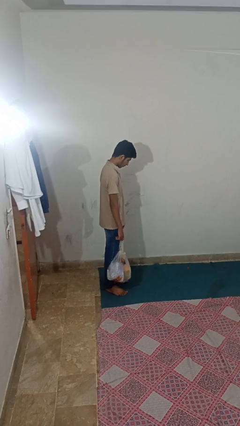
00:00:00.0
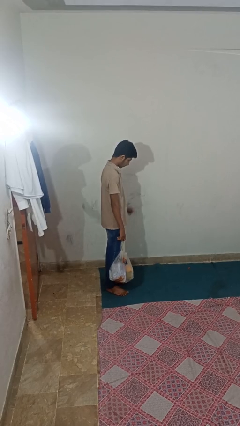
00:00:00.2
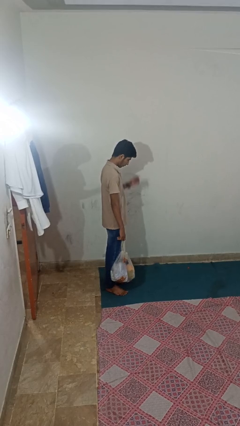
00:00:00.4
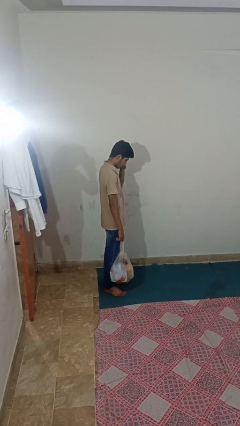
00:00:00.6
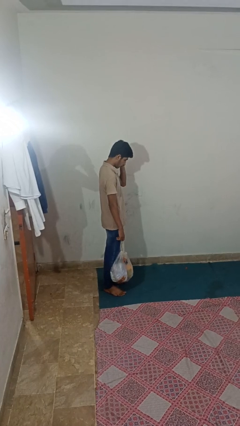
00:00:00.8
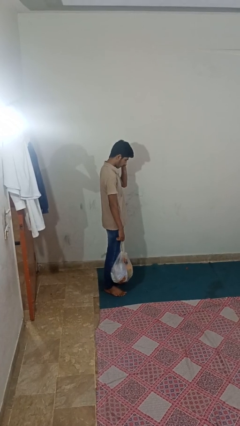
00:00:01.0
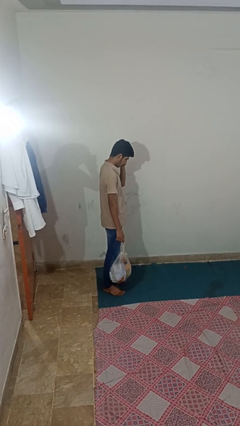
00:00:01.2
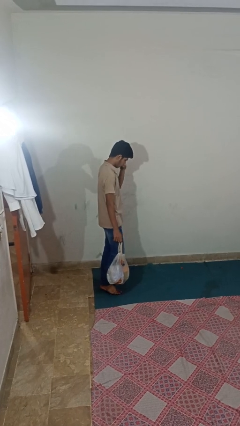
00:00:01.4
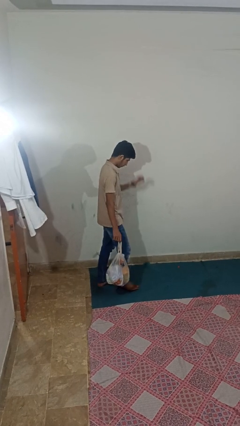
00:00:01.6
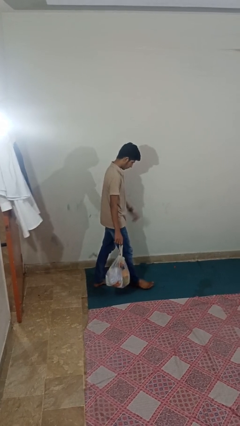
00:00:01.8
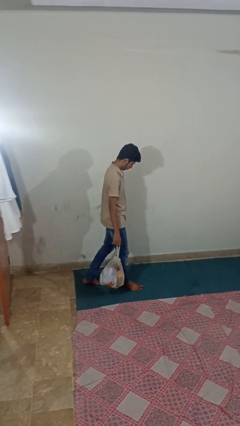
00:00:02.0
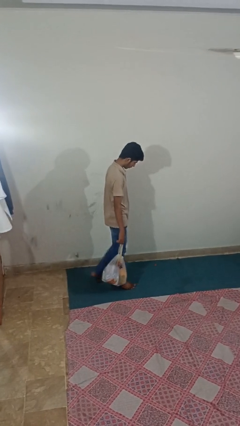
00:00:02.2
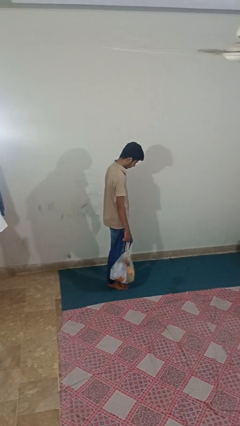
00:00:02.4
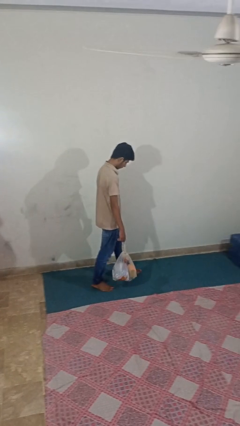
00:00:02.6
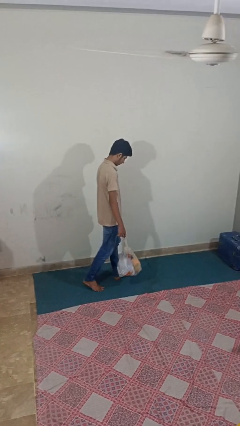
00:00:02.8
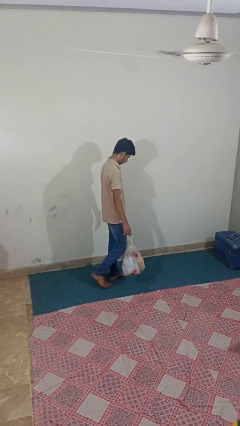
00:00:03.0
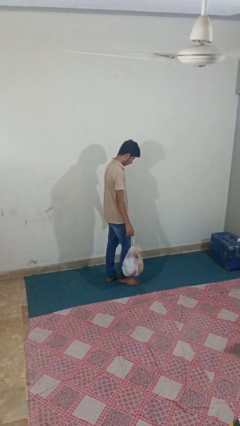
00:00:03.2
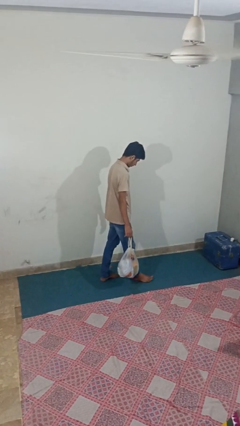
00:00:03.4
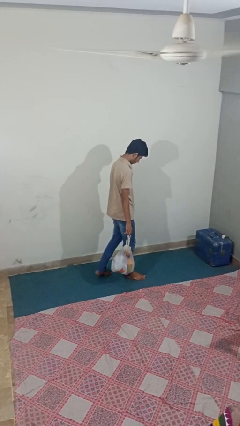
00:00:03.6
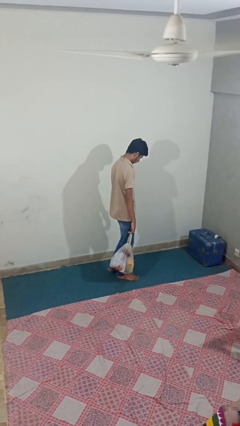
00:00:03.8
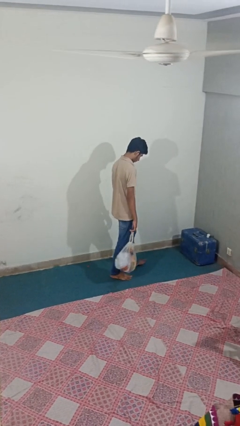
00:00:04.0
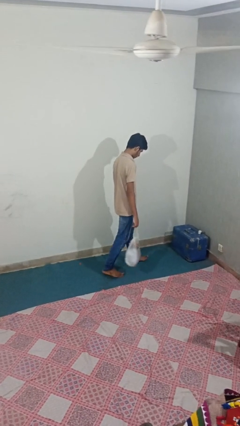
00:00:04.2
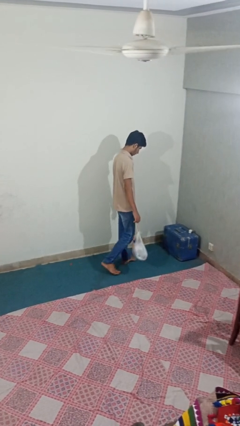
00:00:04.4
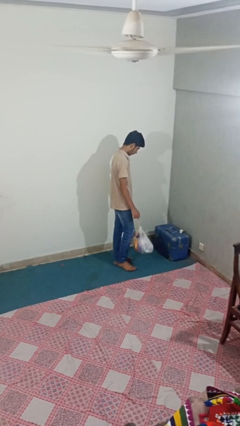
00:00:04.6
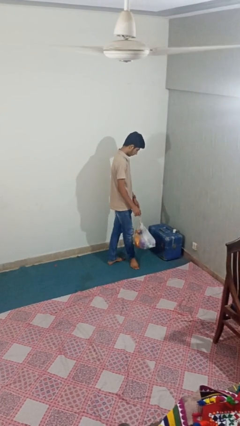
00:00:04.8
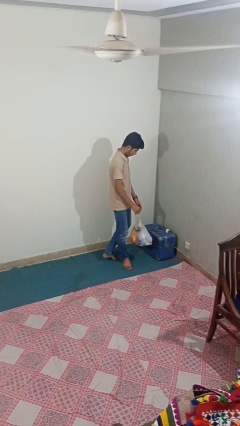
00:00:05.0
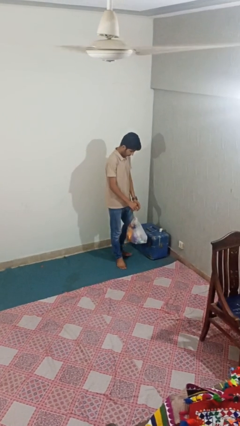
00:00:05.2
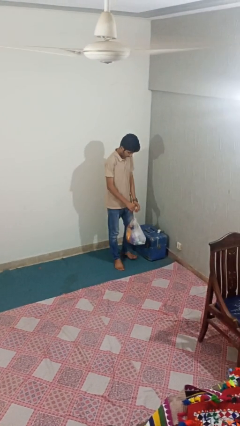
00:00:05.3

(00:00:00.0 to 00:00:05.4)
person carries groceries

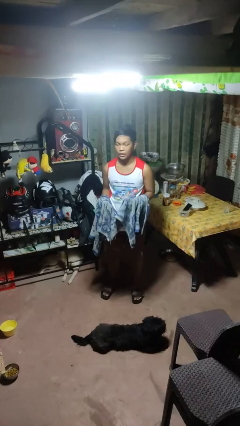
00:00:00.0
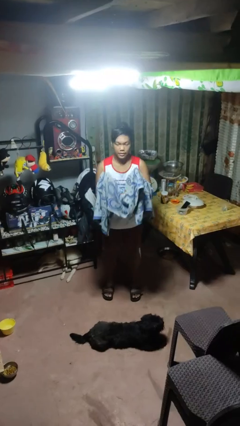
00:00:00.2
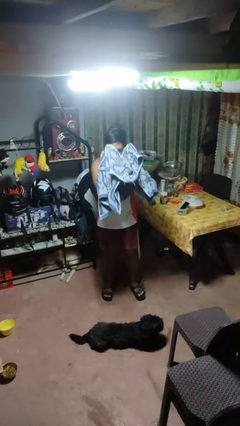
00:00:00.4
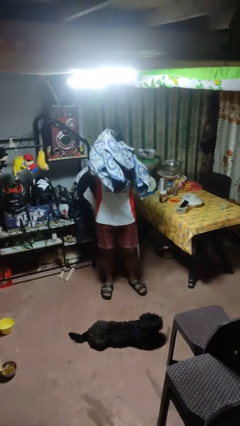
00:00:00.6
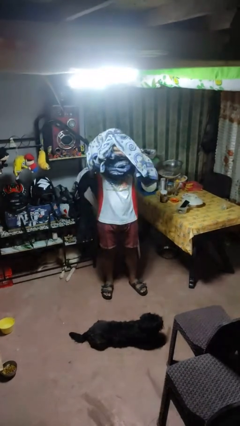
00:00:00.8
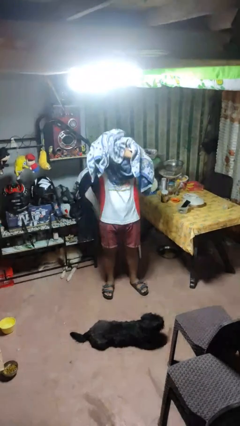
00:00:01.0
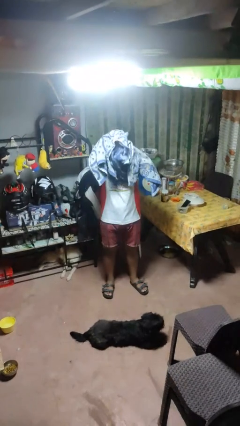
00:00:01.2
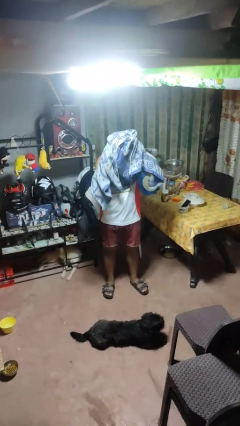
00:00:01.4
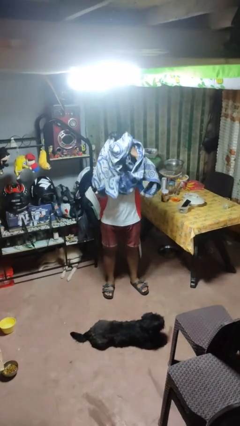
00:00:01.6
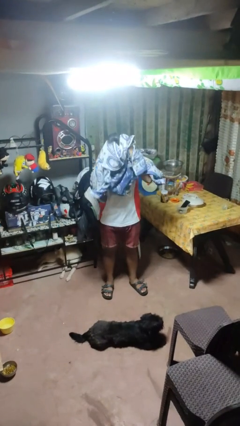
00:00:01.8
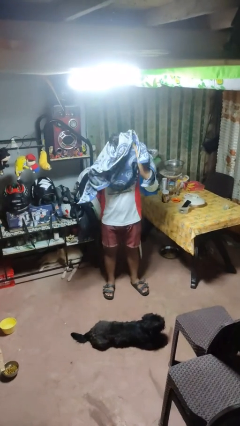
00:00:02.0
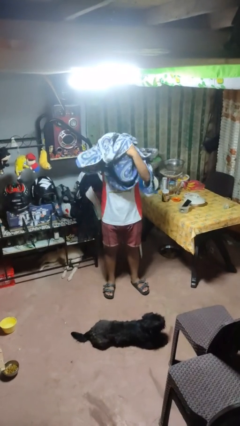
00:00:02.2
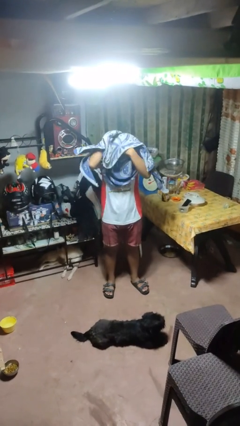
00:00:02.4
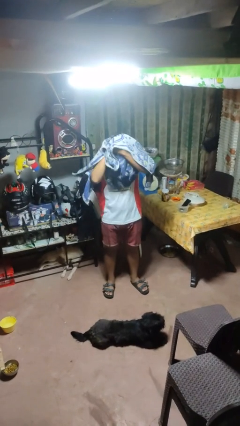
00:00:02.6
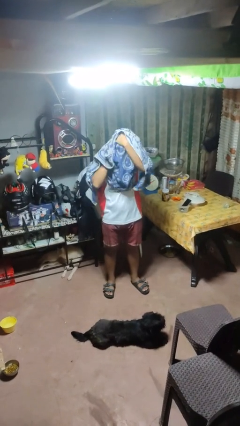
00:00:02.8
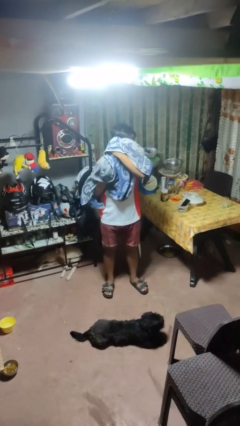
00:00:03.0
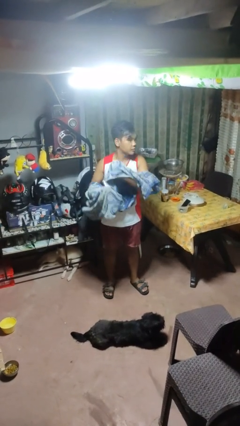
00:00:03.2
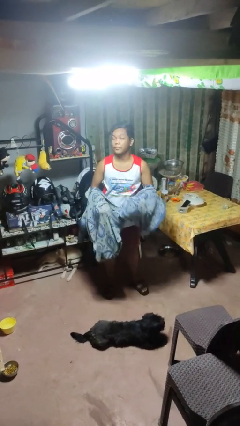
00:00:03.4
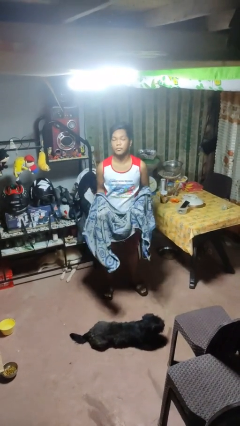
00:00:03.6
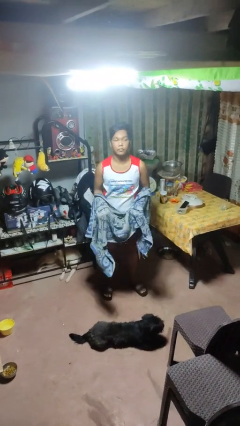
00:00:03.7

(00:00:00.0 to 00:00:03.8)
person dries hair with towel

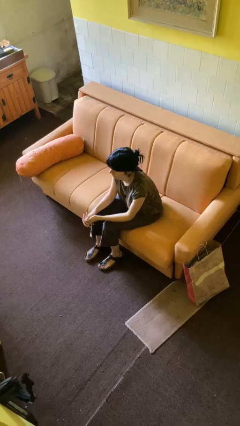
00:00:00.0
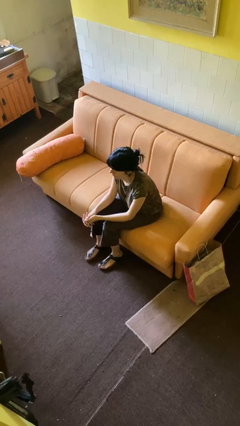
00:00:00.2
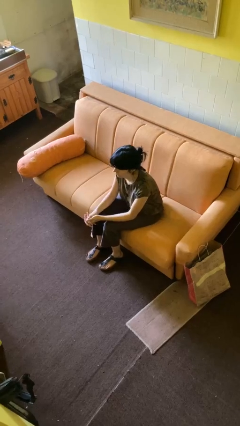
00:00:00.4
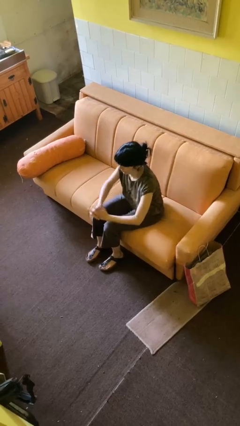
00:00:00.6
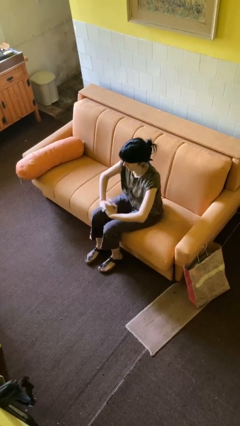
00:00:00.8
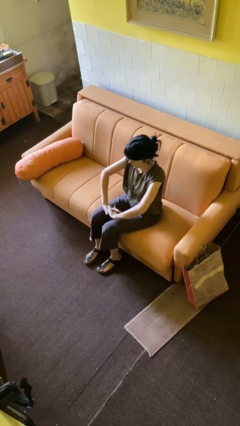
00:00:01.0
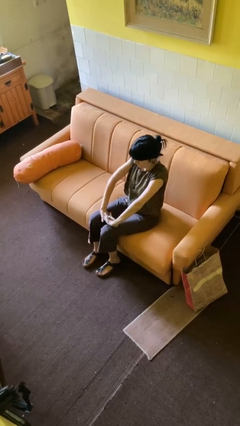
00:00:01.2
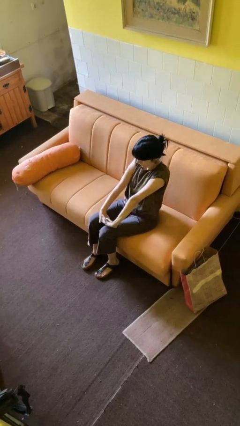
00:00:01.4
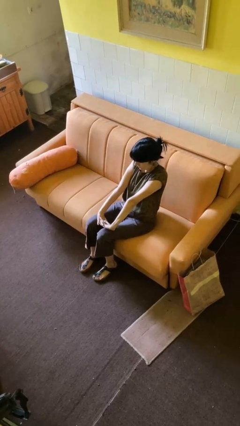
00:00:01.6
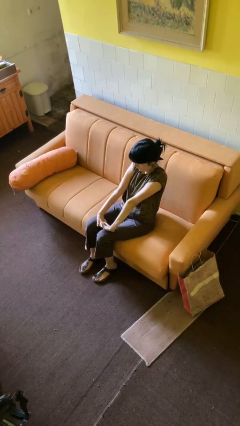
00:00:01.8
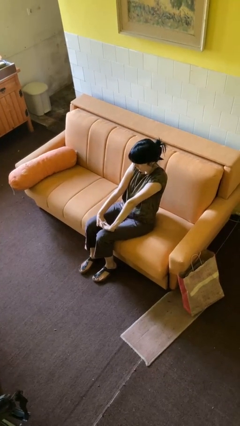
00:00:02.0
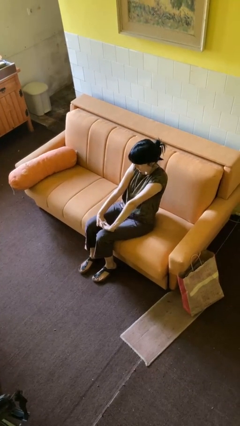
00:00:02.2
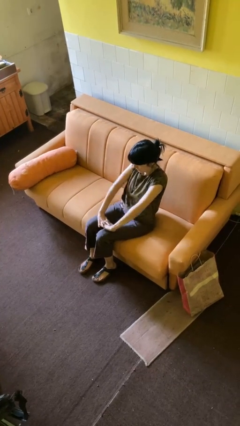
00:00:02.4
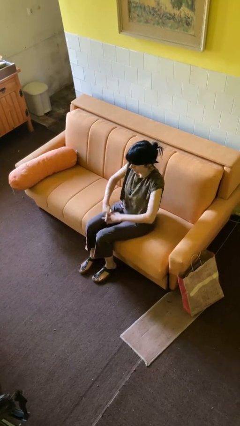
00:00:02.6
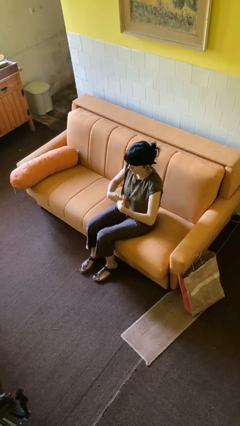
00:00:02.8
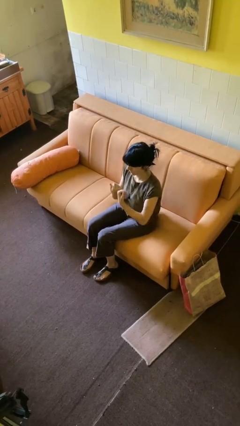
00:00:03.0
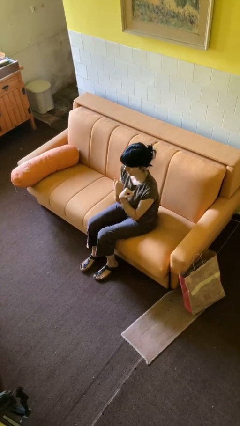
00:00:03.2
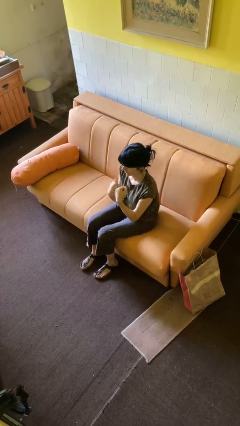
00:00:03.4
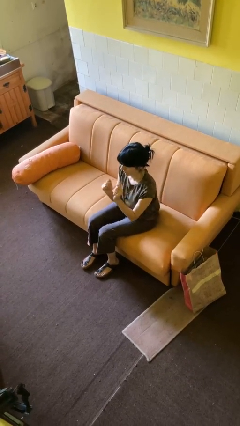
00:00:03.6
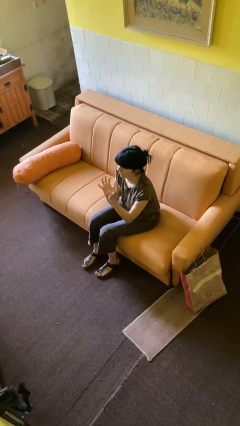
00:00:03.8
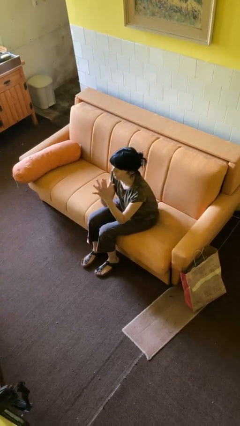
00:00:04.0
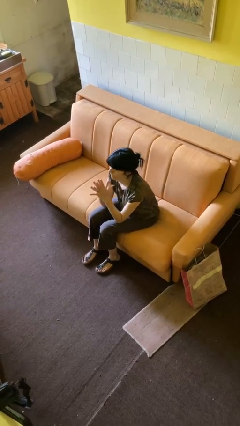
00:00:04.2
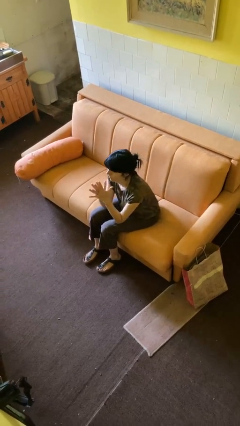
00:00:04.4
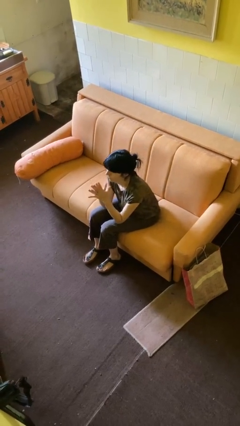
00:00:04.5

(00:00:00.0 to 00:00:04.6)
person cracks knuckles

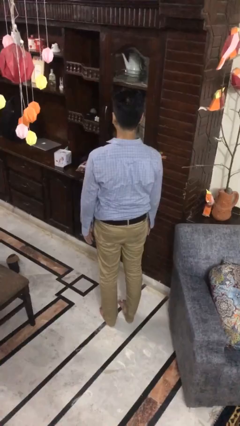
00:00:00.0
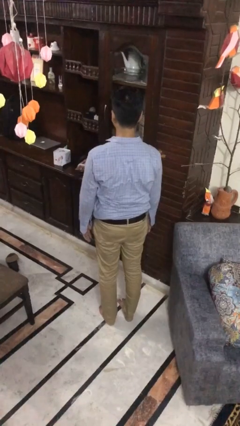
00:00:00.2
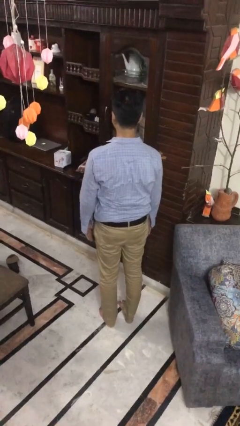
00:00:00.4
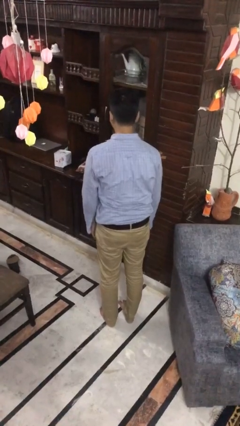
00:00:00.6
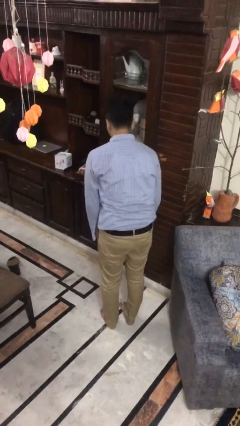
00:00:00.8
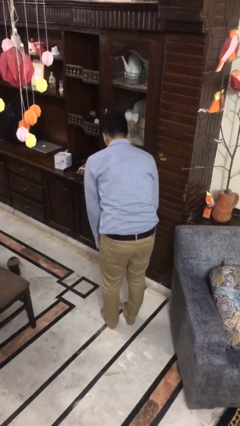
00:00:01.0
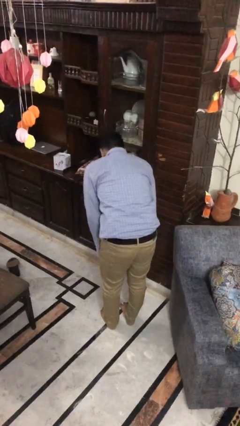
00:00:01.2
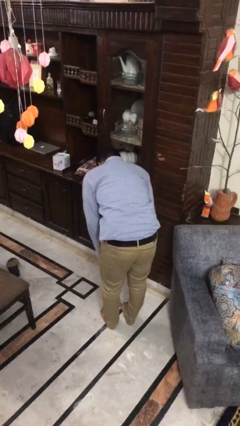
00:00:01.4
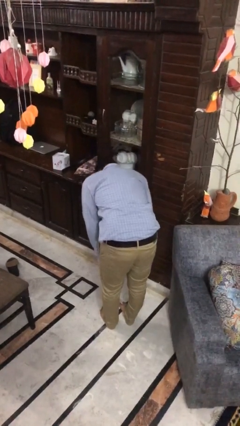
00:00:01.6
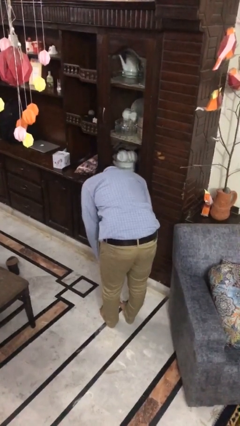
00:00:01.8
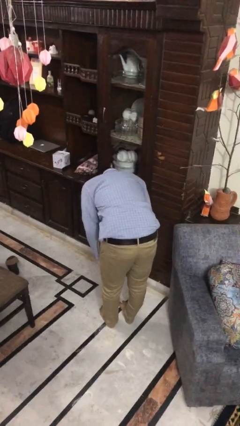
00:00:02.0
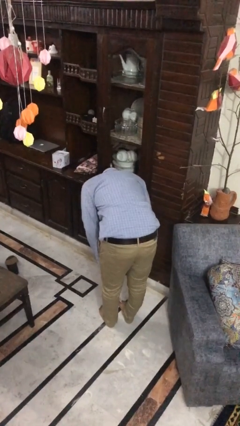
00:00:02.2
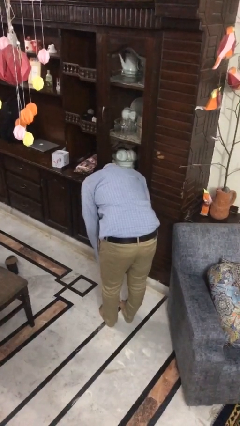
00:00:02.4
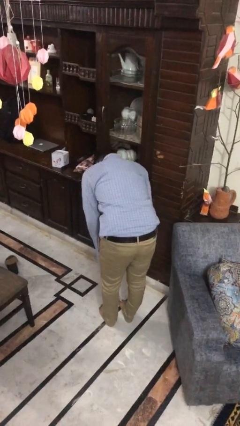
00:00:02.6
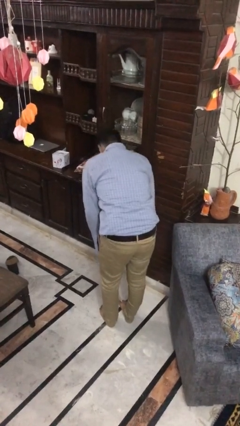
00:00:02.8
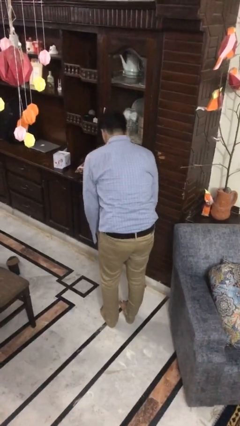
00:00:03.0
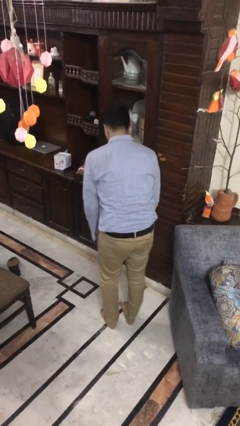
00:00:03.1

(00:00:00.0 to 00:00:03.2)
person bows

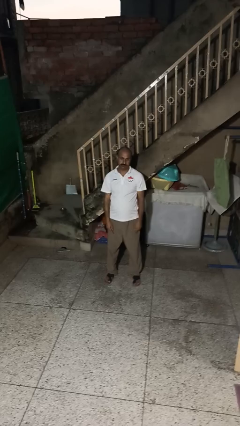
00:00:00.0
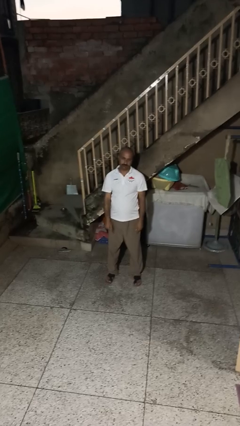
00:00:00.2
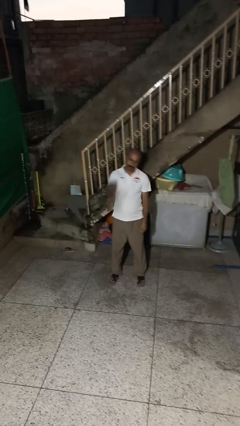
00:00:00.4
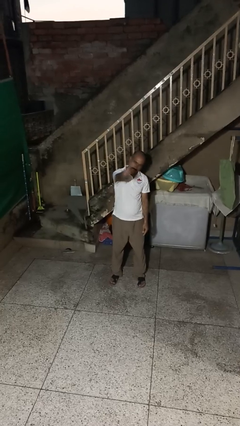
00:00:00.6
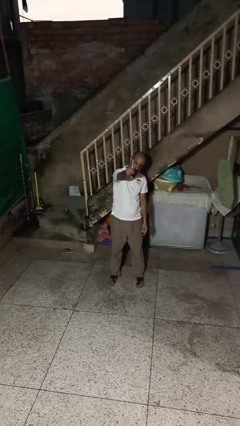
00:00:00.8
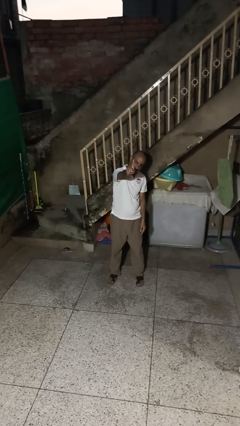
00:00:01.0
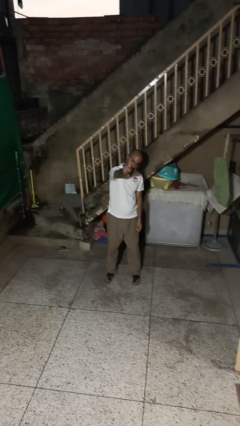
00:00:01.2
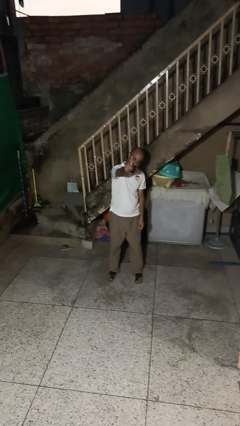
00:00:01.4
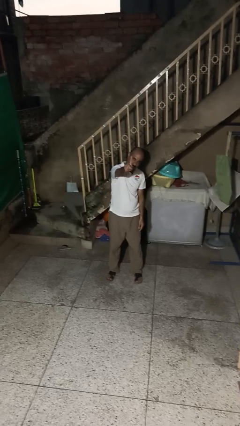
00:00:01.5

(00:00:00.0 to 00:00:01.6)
person gestures number one
